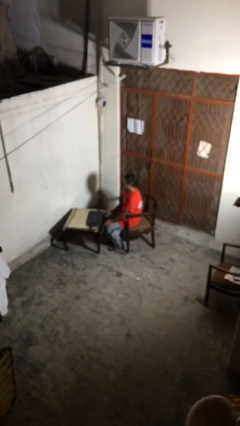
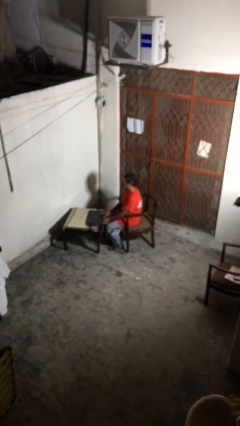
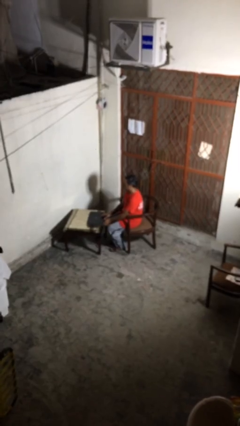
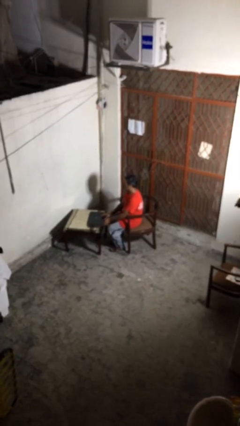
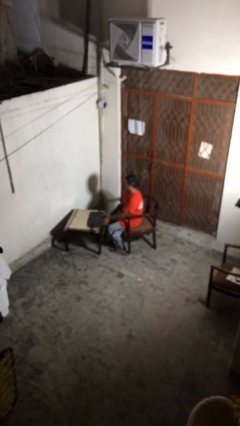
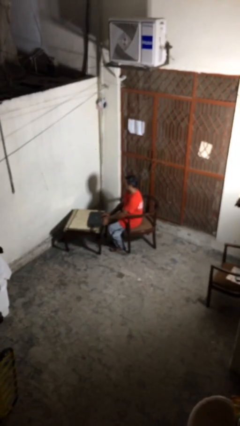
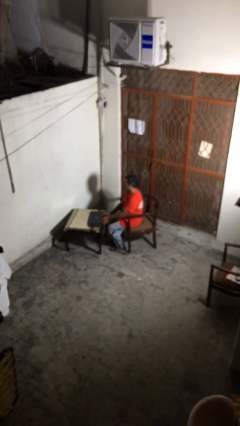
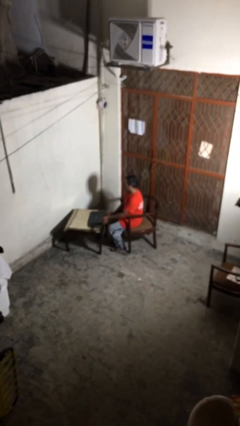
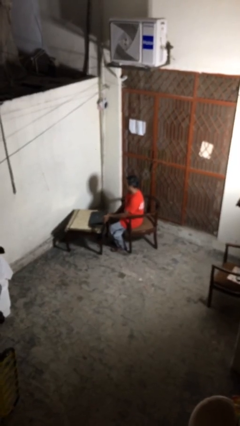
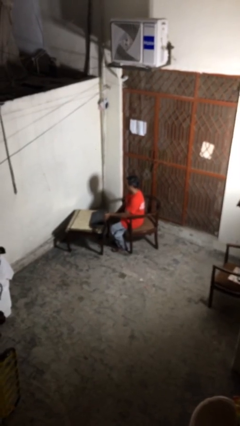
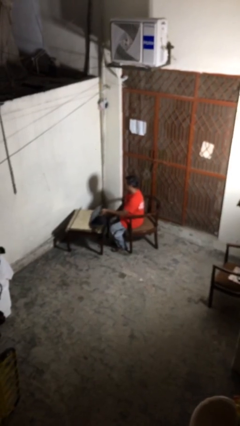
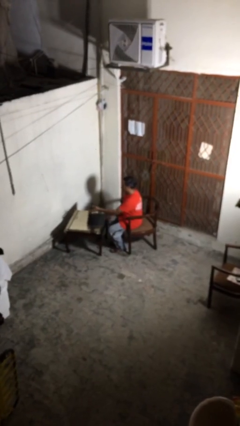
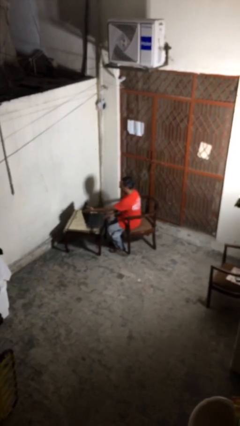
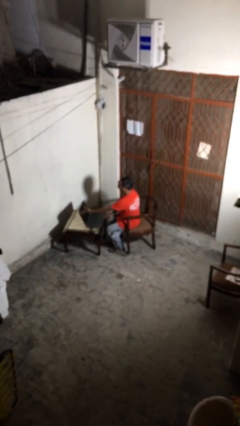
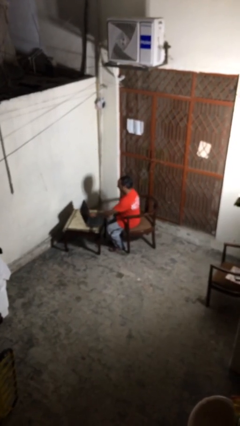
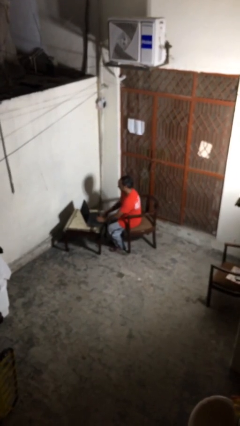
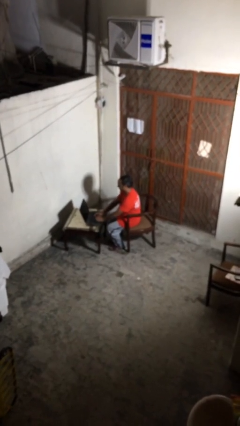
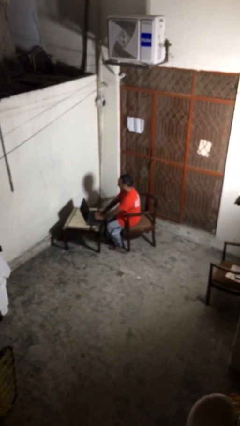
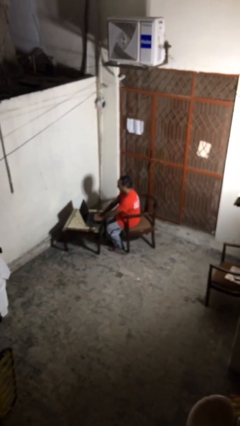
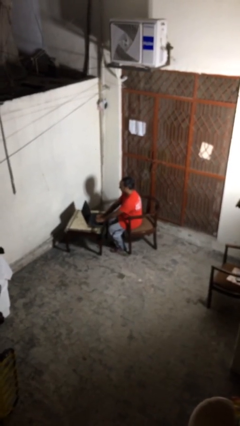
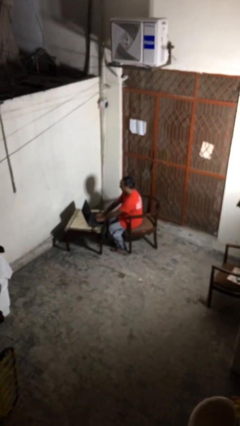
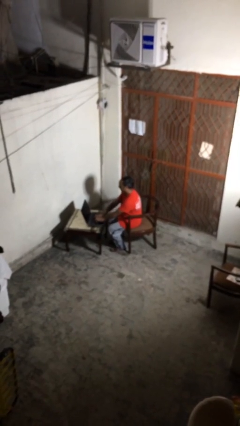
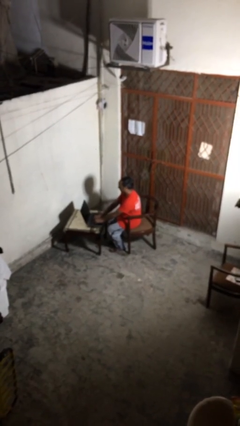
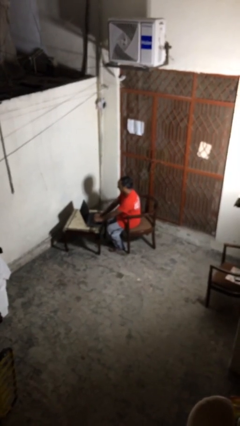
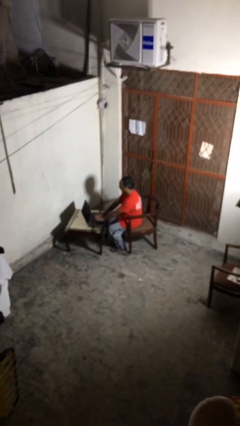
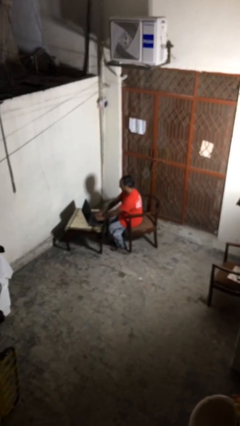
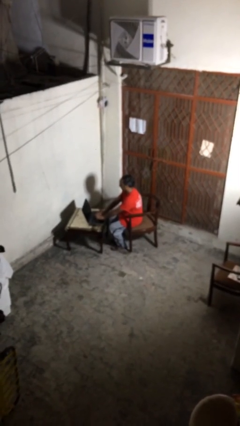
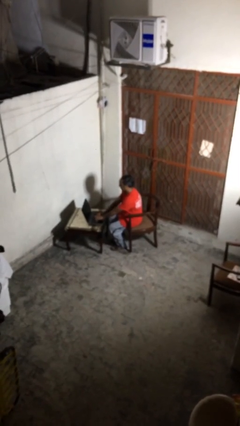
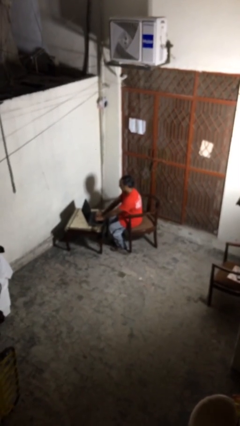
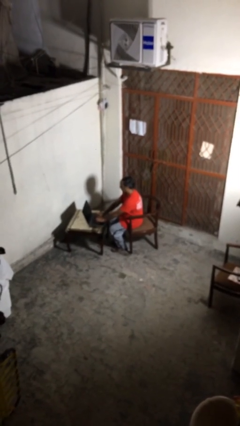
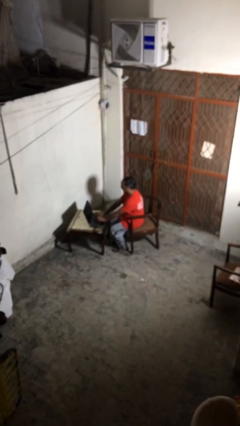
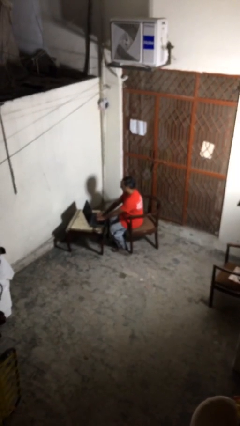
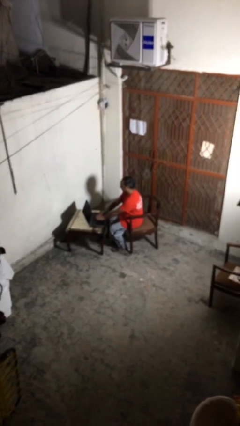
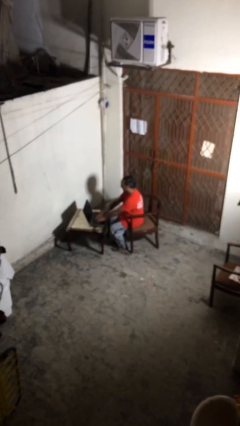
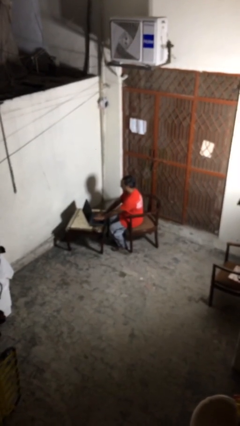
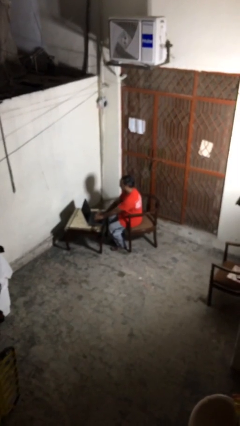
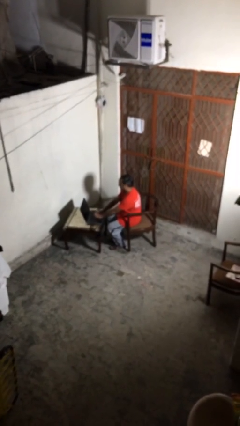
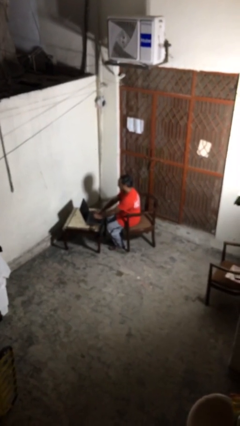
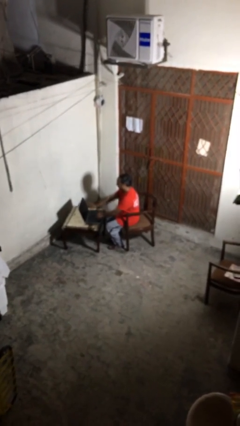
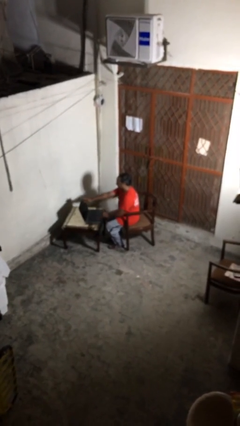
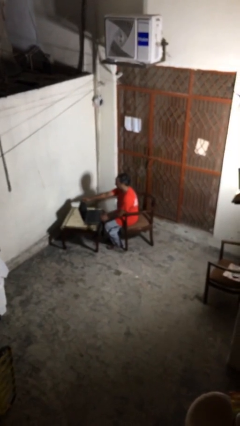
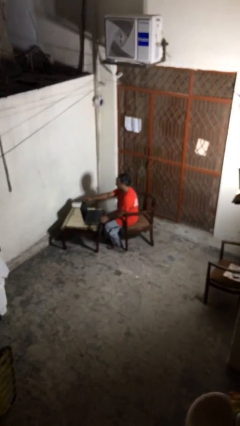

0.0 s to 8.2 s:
person interacts with laptop

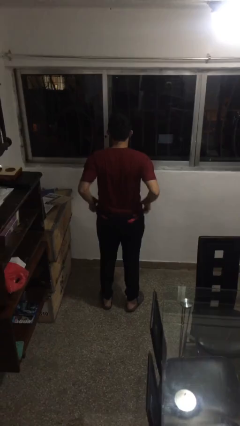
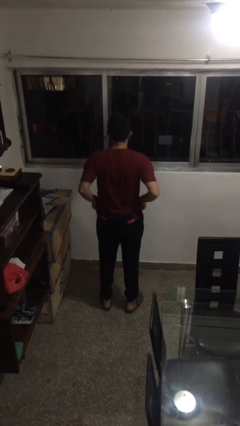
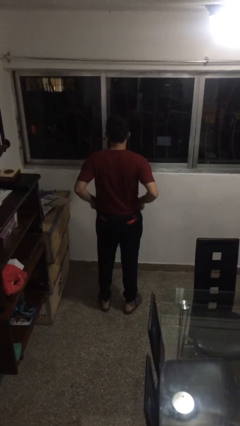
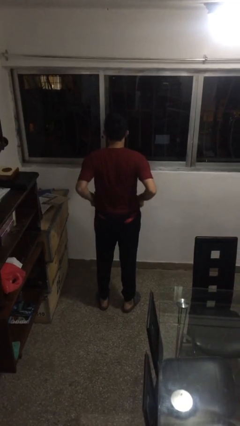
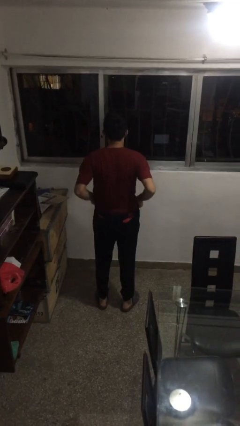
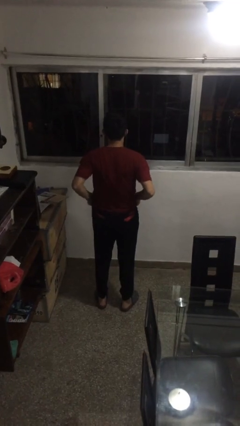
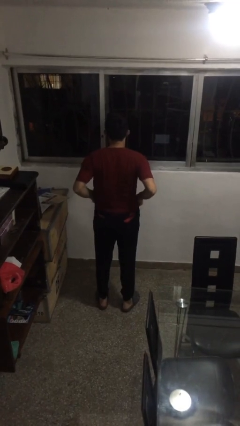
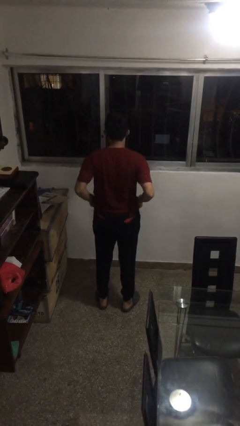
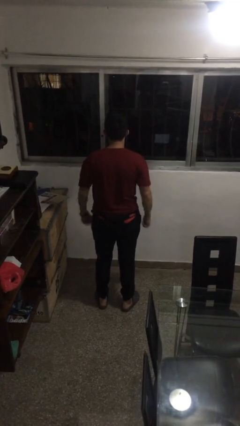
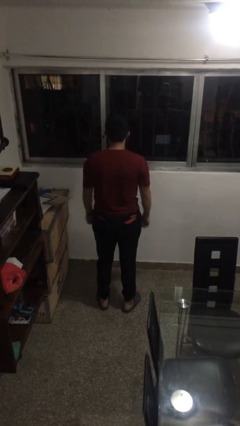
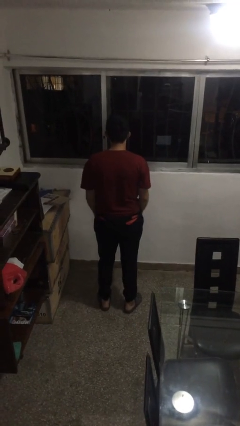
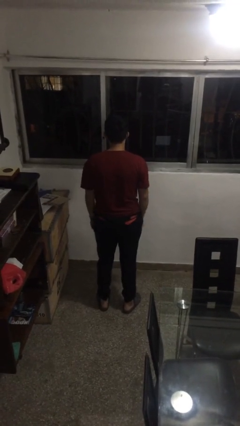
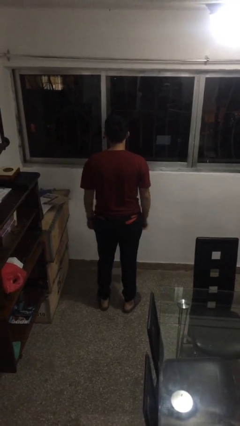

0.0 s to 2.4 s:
person hikes up pants

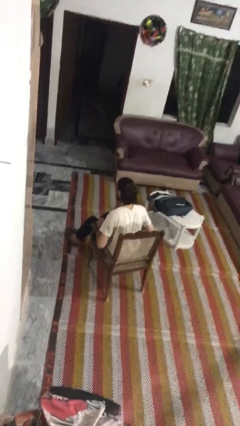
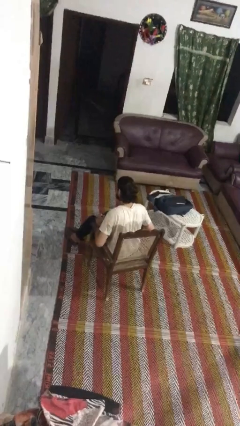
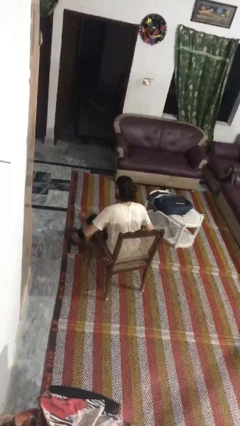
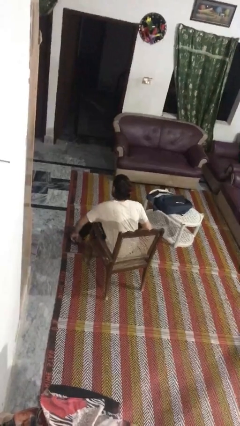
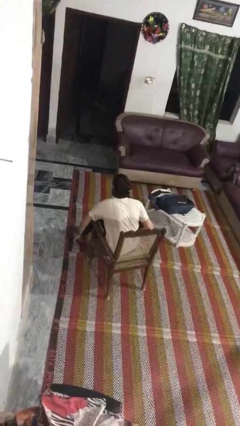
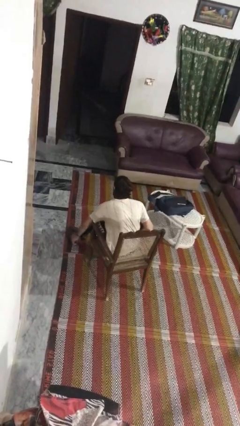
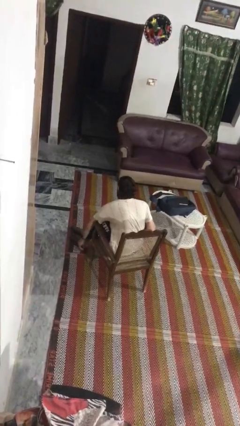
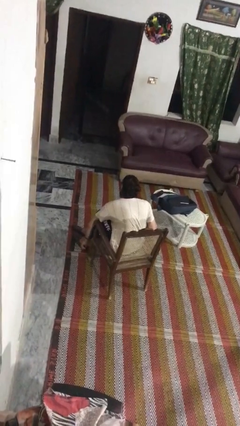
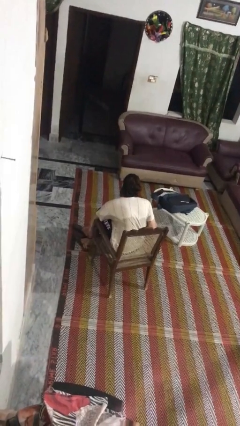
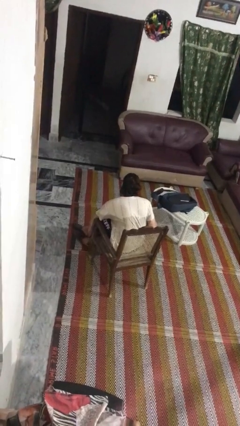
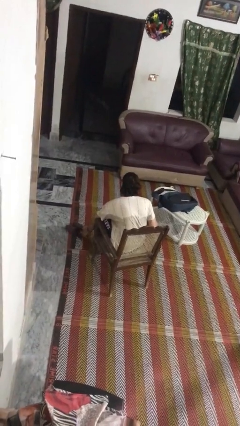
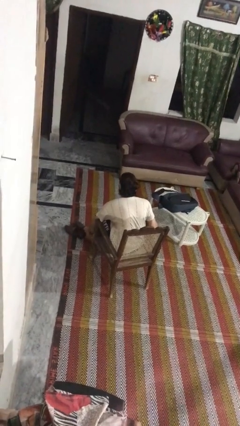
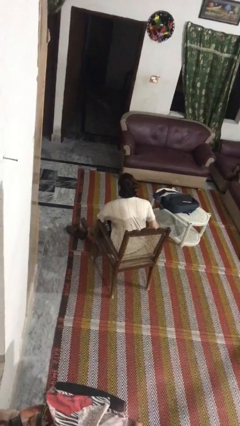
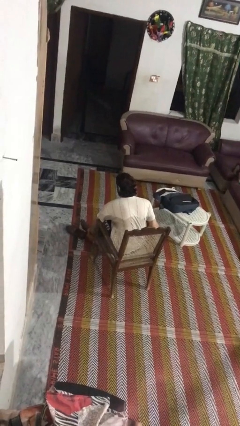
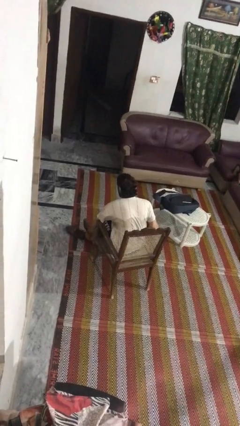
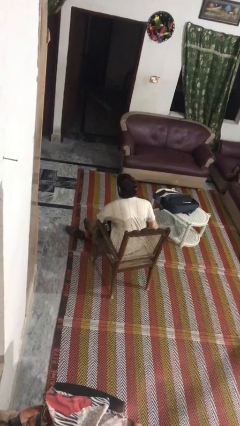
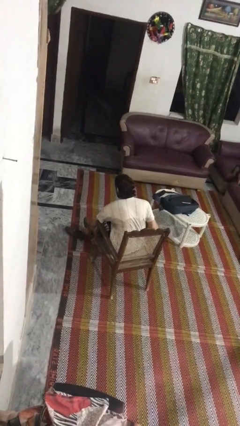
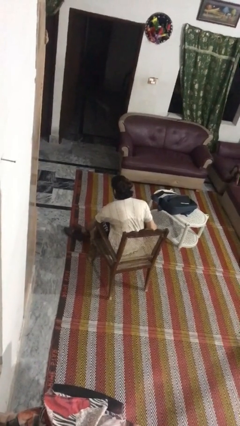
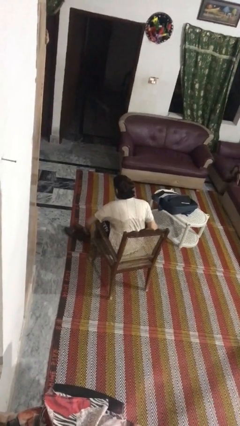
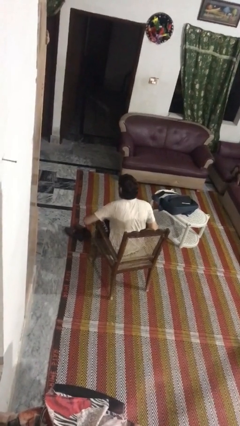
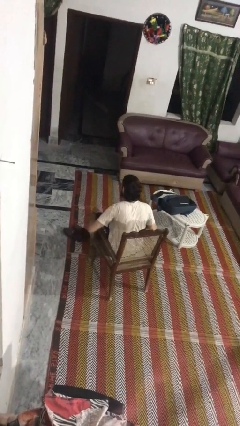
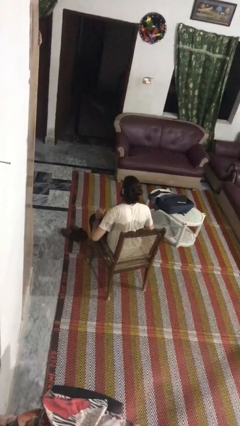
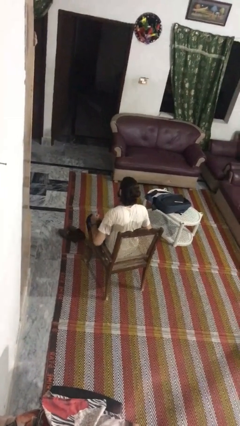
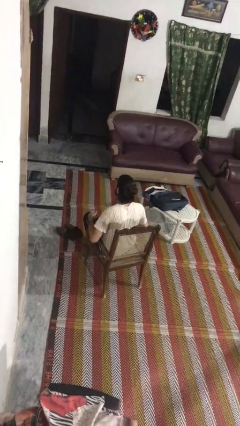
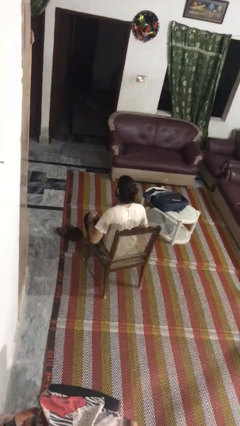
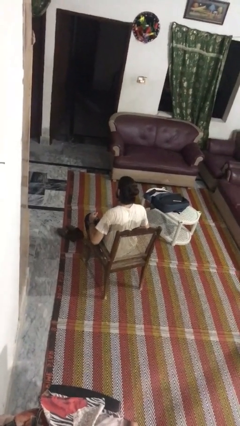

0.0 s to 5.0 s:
person takes off shoes

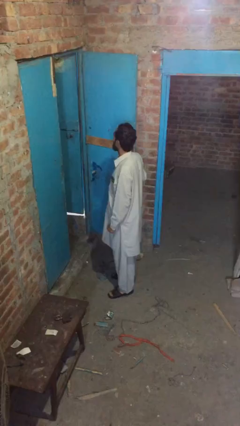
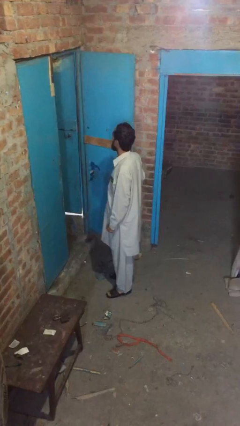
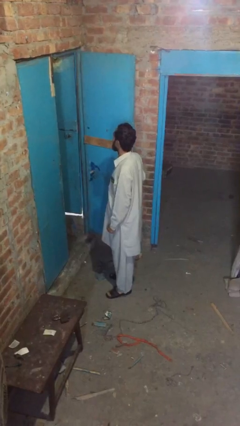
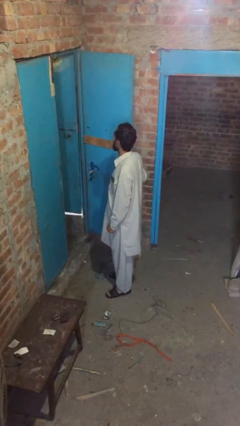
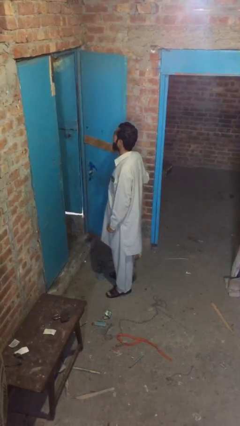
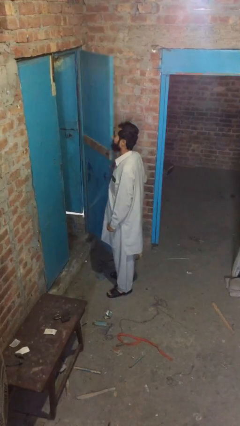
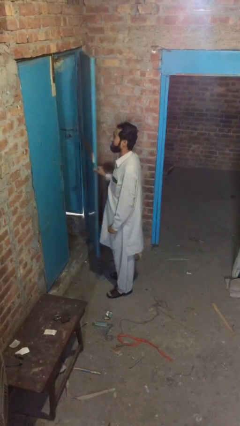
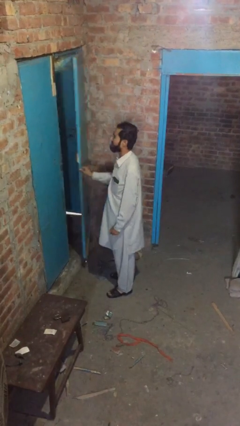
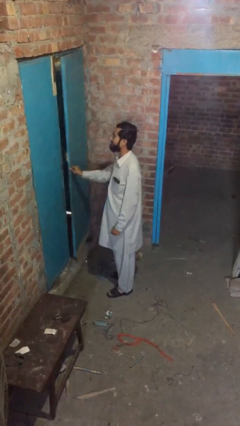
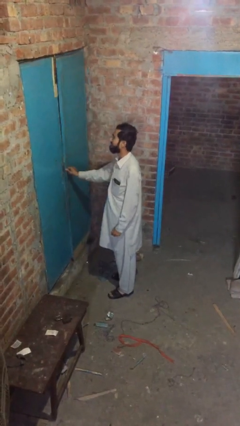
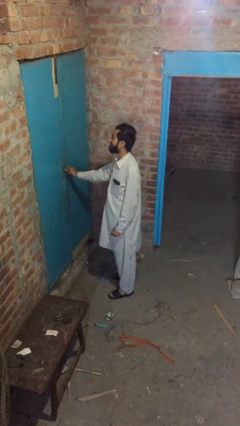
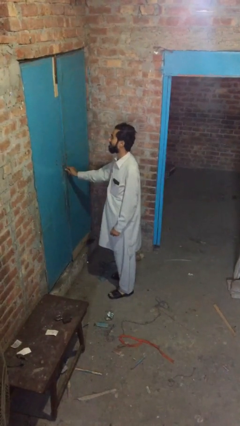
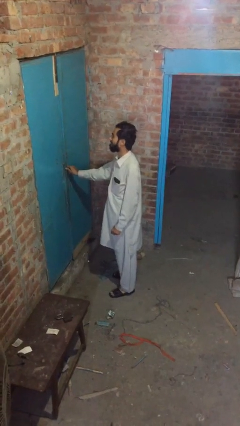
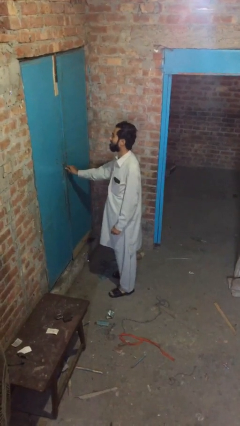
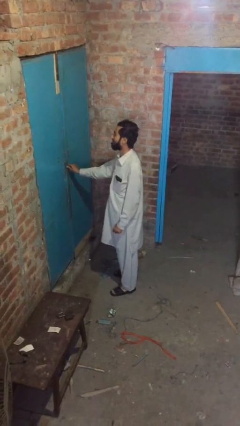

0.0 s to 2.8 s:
person closes facility door
